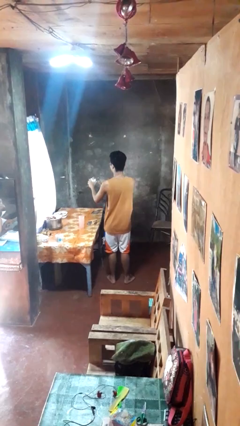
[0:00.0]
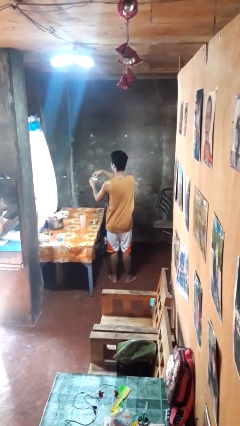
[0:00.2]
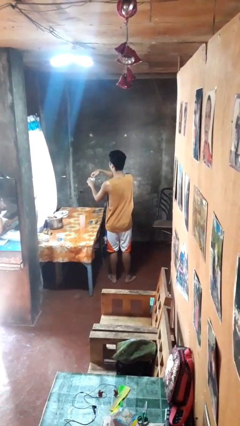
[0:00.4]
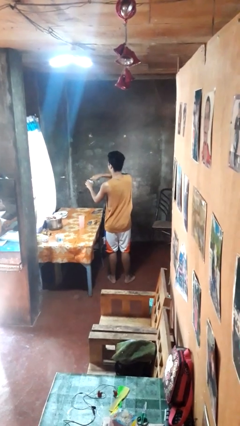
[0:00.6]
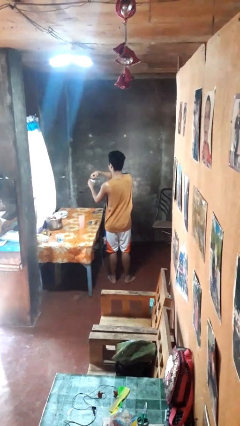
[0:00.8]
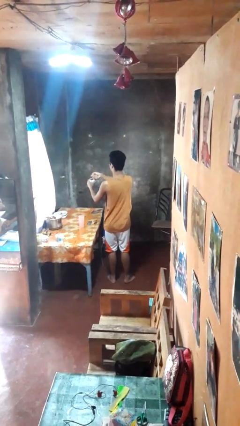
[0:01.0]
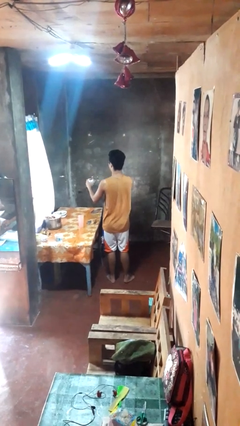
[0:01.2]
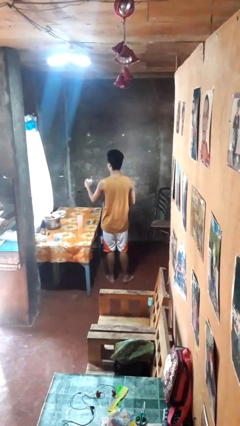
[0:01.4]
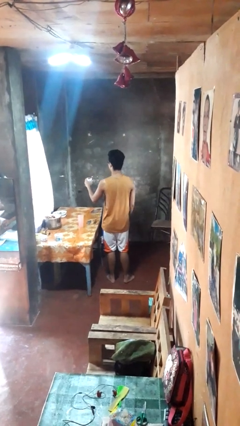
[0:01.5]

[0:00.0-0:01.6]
person opens beverage can

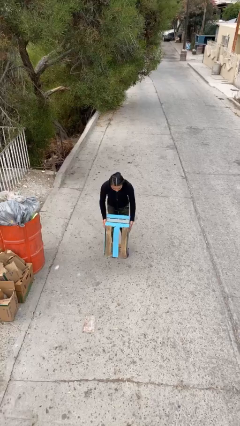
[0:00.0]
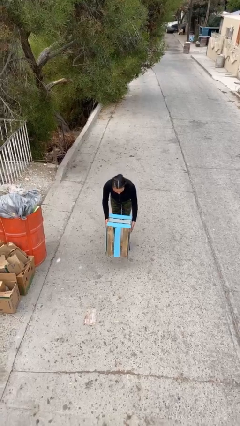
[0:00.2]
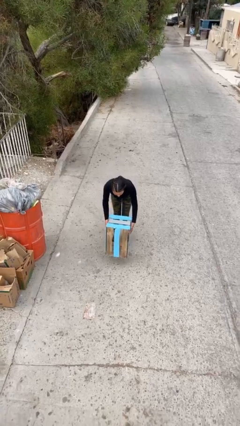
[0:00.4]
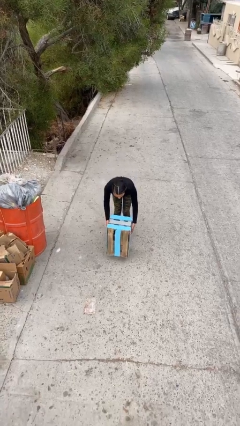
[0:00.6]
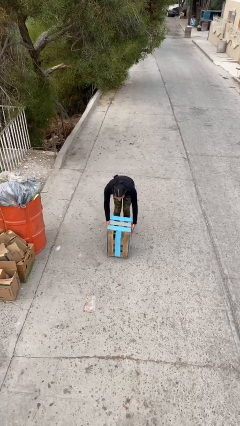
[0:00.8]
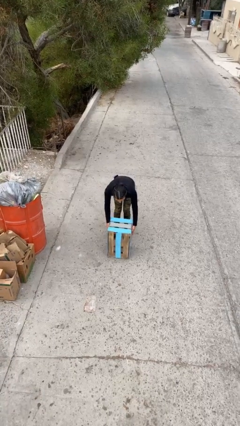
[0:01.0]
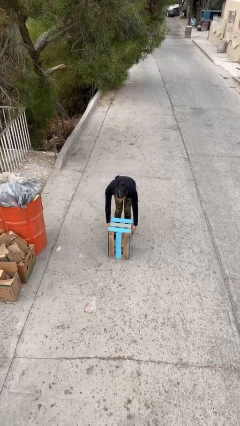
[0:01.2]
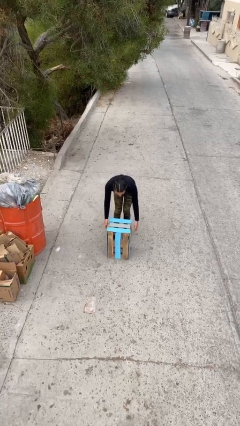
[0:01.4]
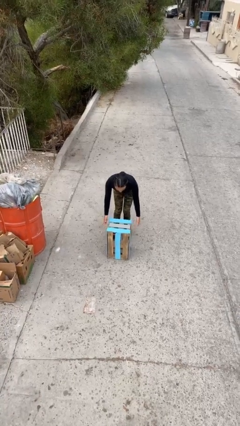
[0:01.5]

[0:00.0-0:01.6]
person puts down object on floor

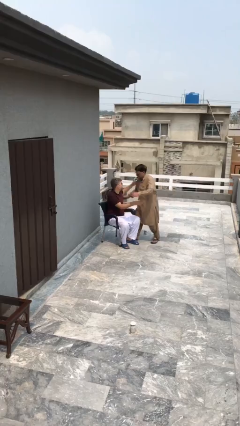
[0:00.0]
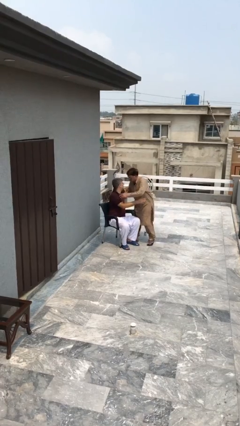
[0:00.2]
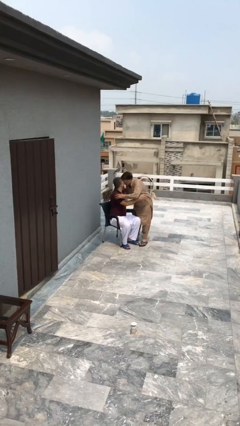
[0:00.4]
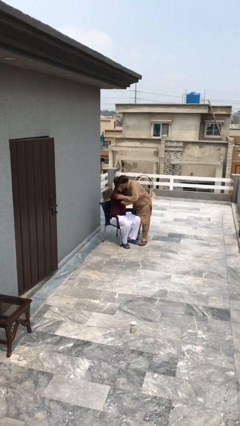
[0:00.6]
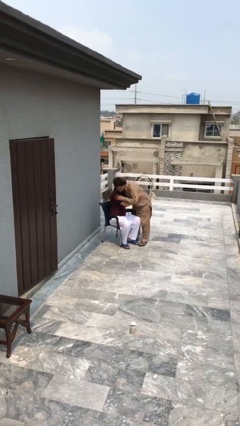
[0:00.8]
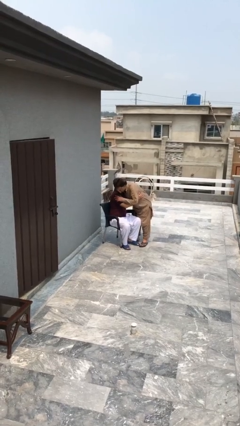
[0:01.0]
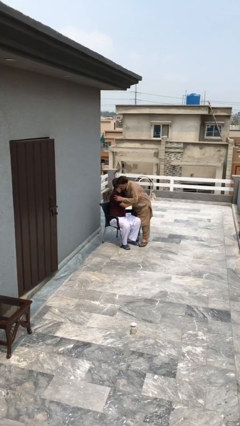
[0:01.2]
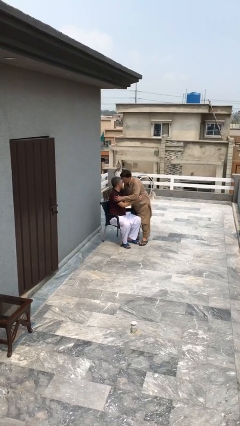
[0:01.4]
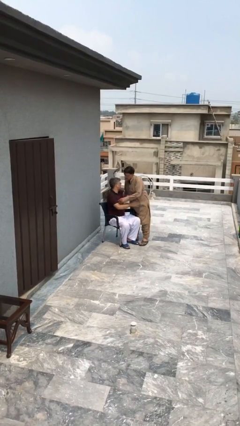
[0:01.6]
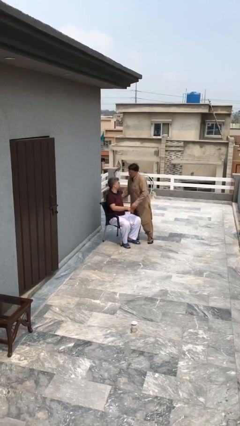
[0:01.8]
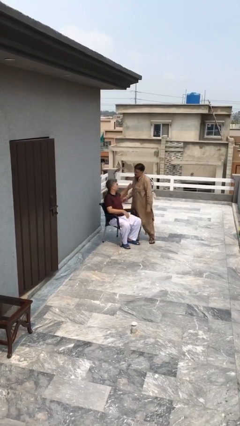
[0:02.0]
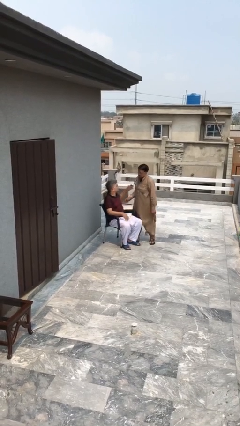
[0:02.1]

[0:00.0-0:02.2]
person embraces person

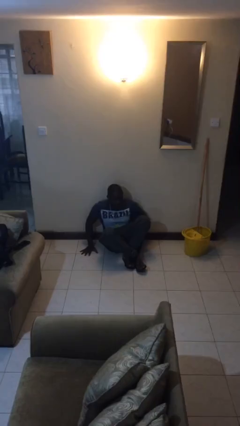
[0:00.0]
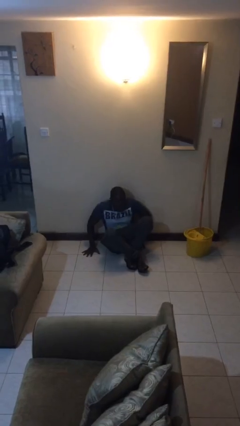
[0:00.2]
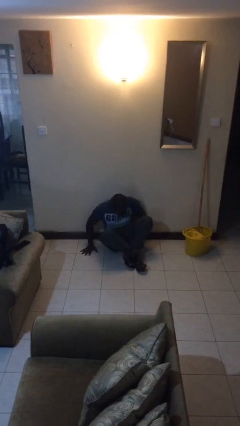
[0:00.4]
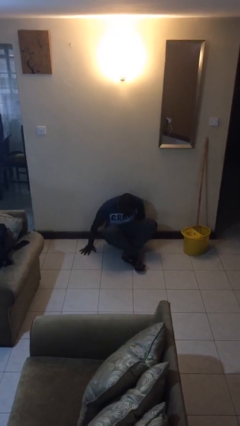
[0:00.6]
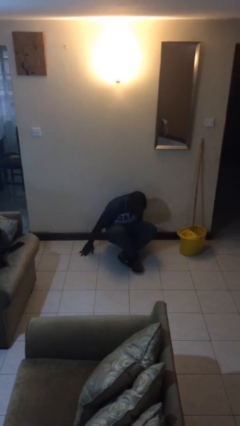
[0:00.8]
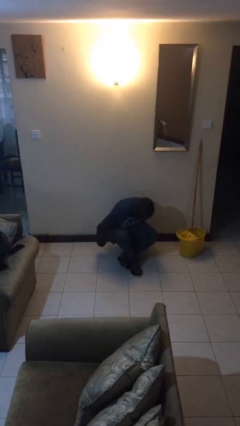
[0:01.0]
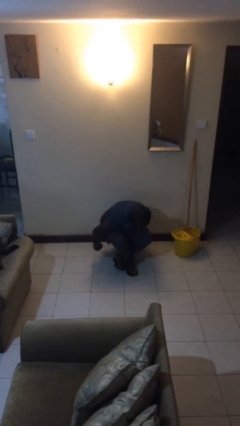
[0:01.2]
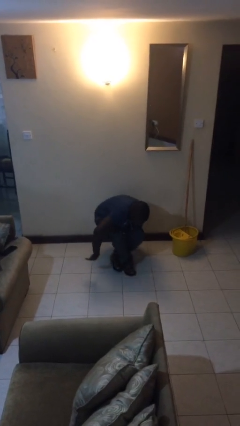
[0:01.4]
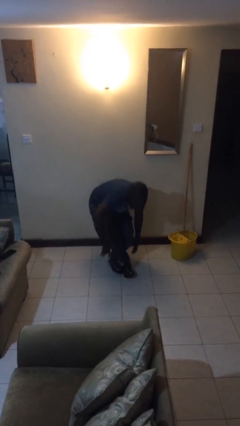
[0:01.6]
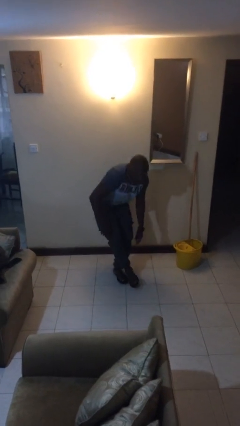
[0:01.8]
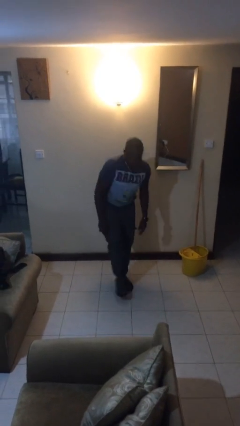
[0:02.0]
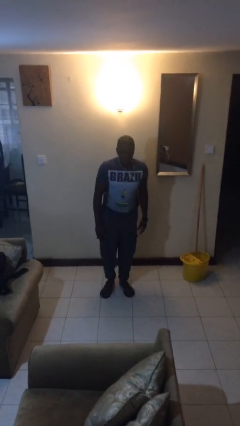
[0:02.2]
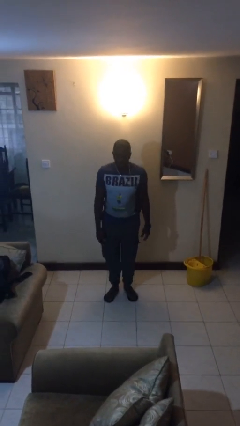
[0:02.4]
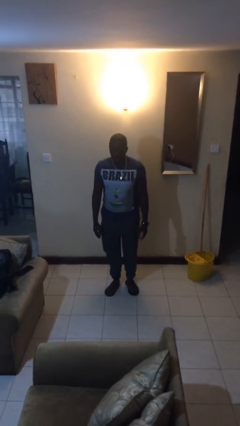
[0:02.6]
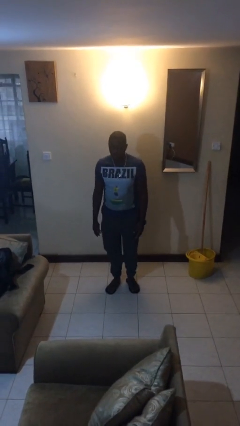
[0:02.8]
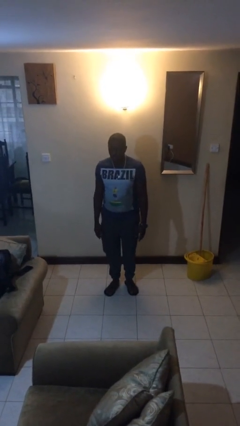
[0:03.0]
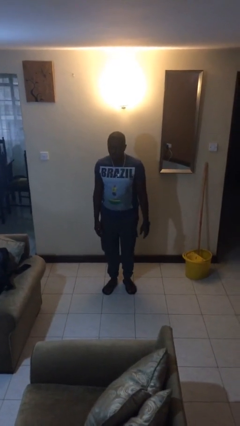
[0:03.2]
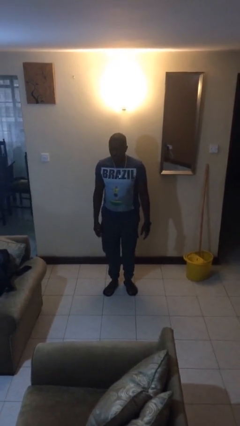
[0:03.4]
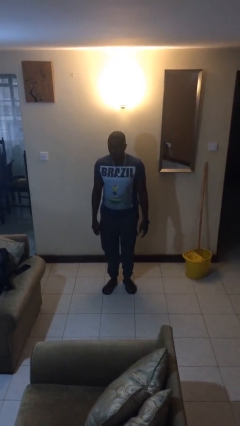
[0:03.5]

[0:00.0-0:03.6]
person stands up from floor

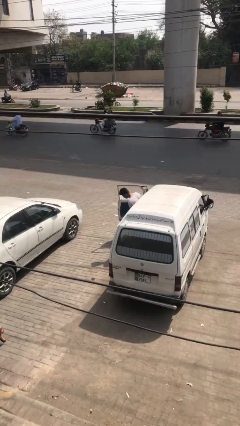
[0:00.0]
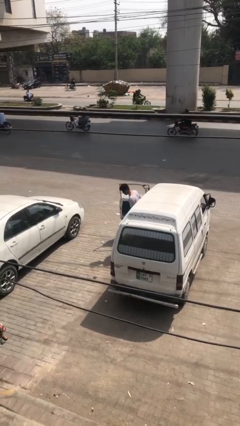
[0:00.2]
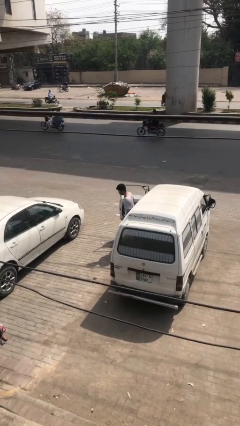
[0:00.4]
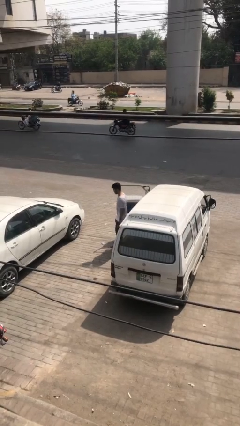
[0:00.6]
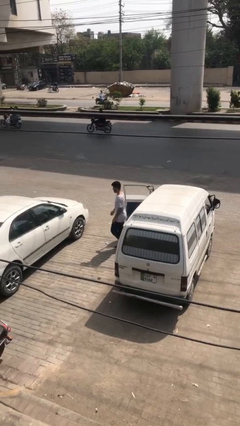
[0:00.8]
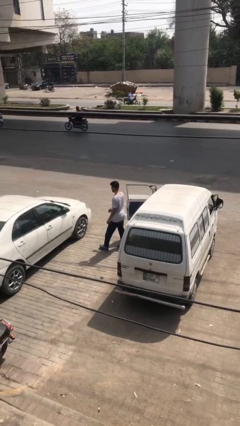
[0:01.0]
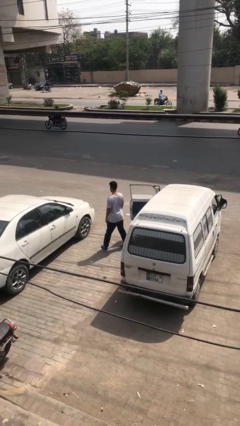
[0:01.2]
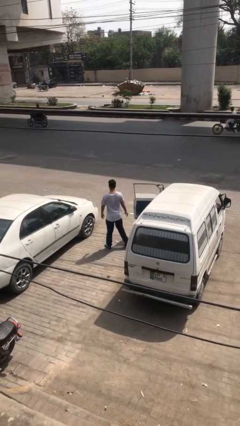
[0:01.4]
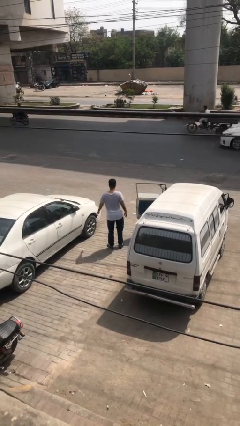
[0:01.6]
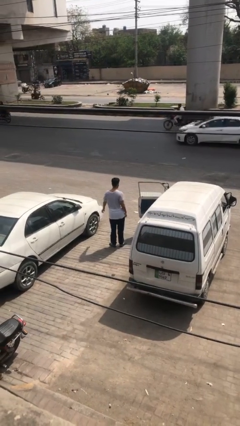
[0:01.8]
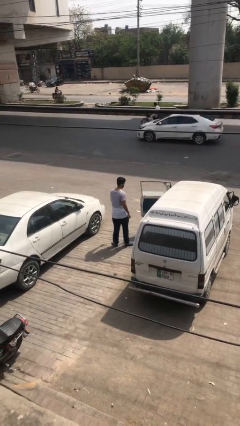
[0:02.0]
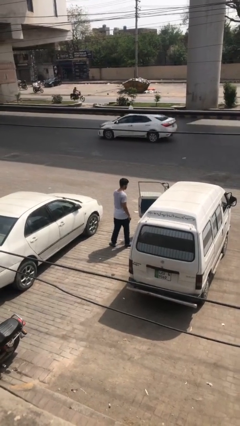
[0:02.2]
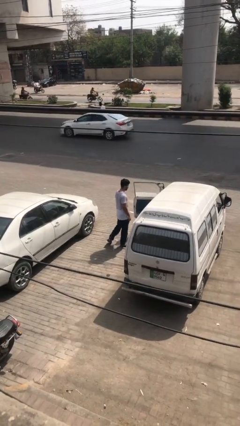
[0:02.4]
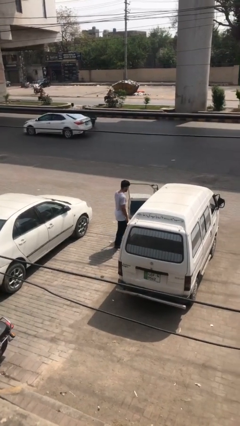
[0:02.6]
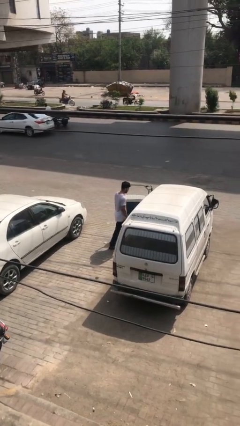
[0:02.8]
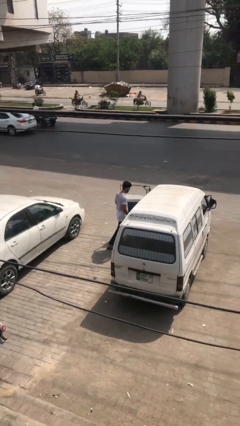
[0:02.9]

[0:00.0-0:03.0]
person exits car

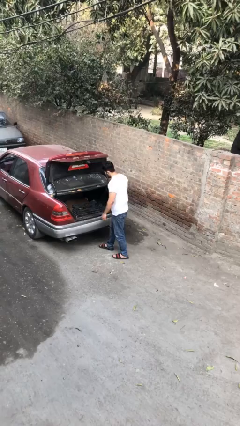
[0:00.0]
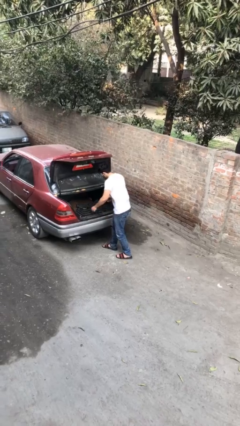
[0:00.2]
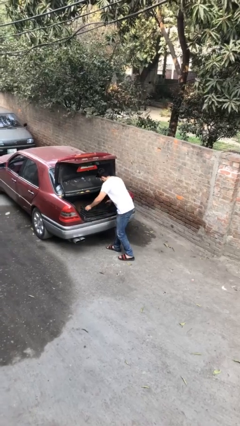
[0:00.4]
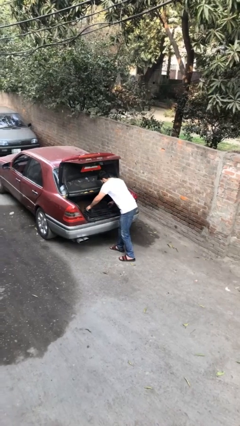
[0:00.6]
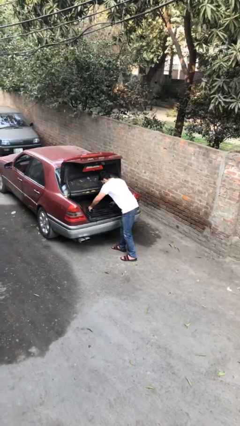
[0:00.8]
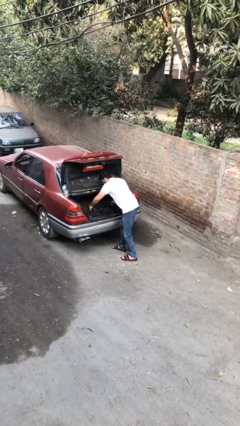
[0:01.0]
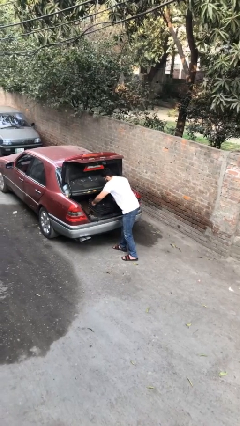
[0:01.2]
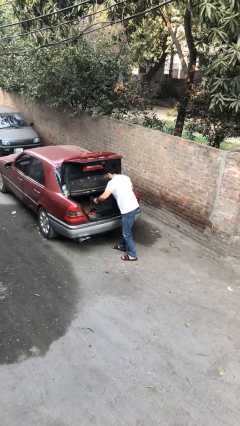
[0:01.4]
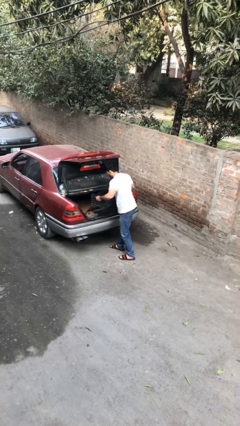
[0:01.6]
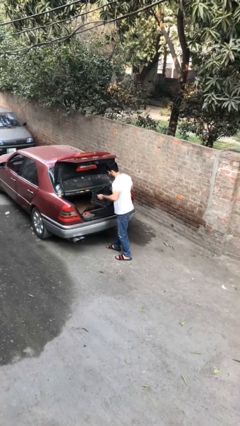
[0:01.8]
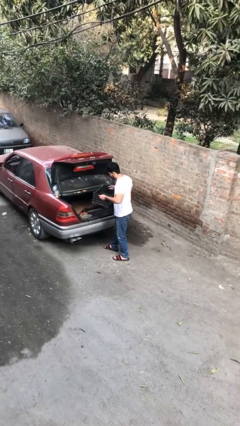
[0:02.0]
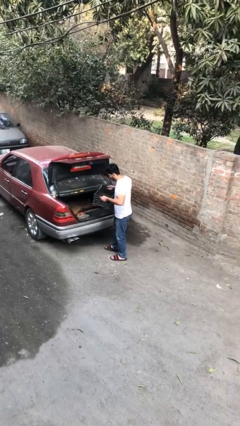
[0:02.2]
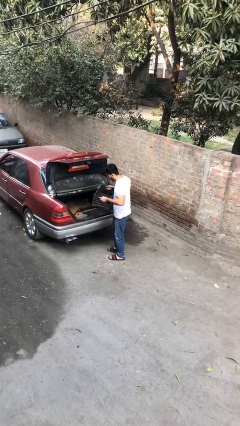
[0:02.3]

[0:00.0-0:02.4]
person unloads car

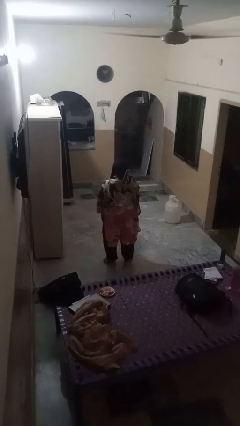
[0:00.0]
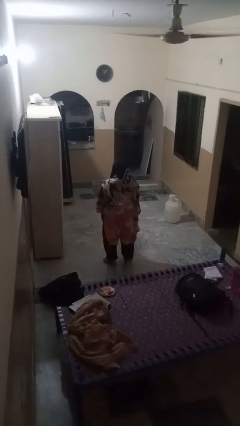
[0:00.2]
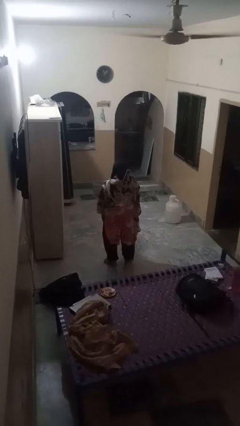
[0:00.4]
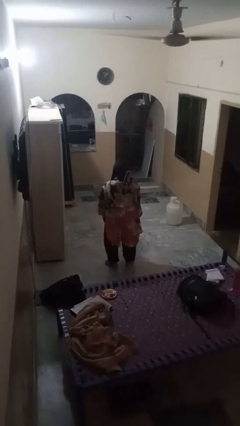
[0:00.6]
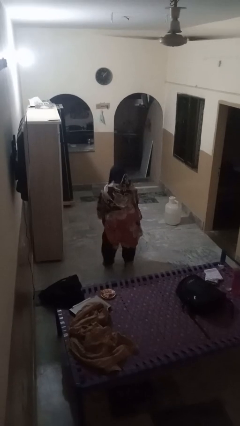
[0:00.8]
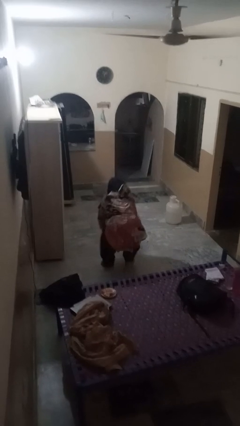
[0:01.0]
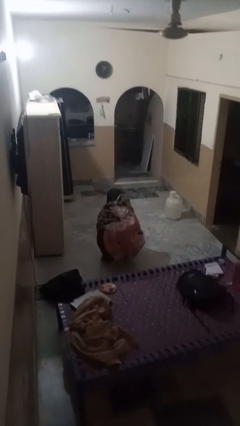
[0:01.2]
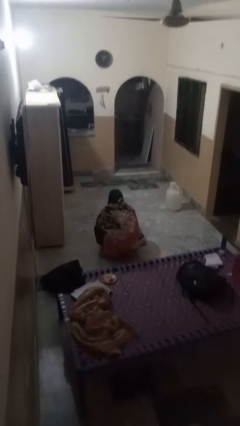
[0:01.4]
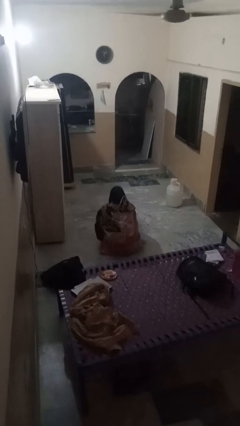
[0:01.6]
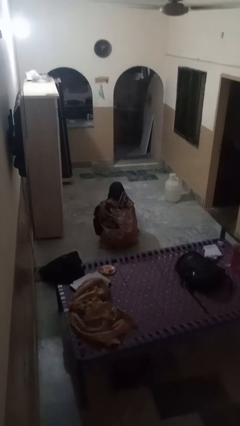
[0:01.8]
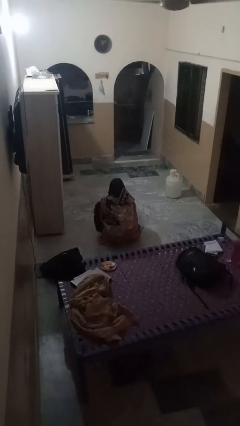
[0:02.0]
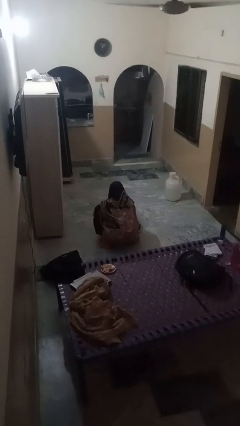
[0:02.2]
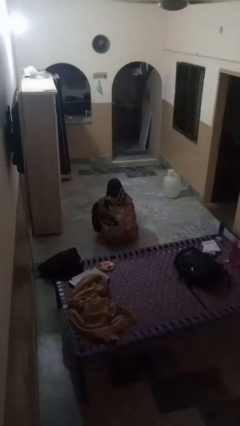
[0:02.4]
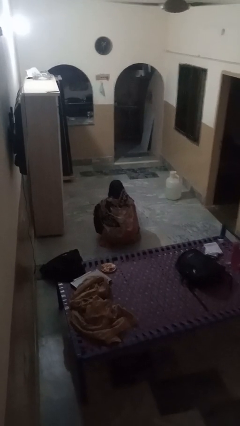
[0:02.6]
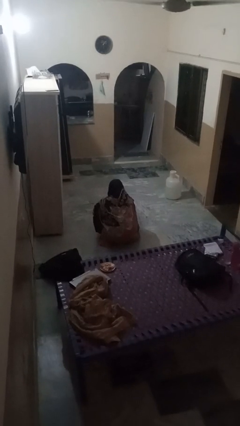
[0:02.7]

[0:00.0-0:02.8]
person squats
